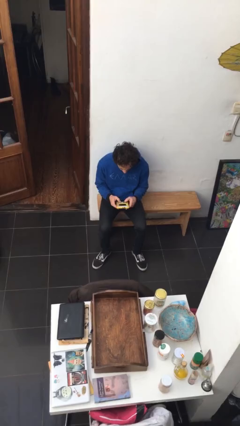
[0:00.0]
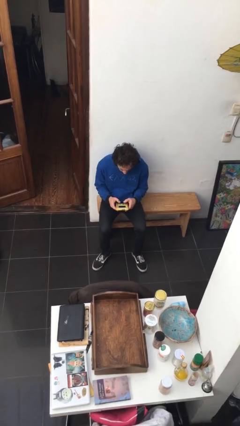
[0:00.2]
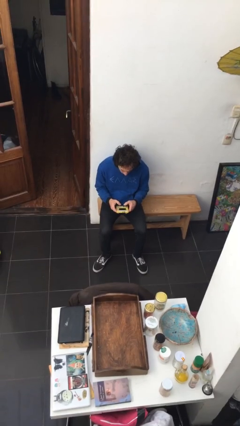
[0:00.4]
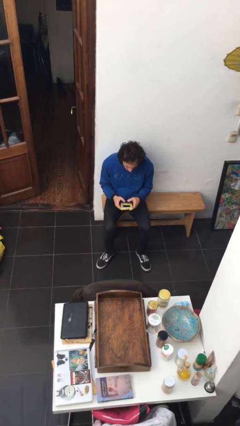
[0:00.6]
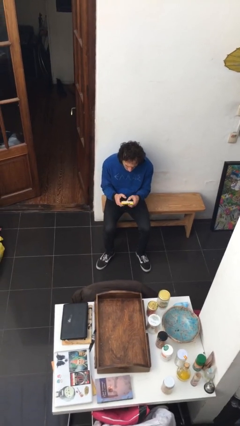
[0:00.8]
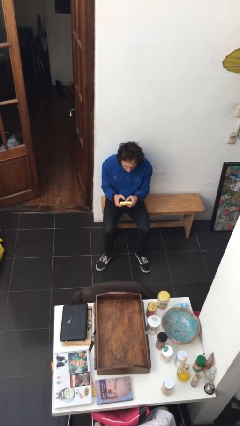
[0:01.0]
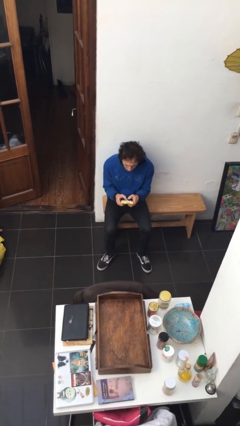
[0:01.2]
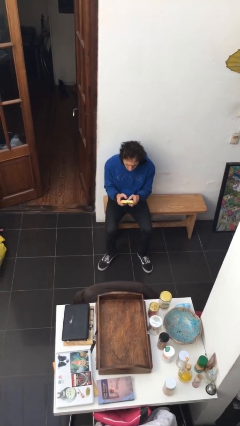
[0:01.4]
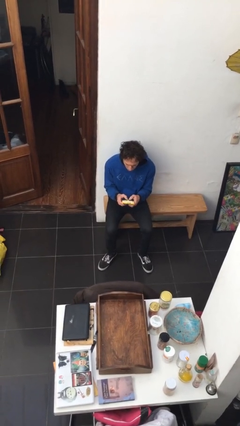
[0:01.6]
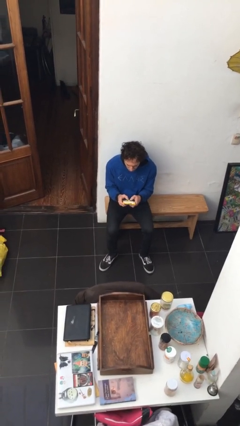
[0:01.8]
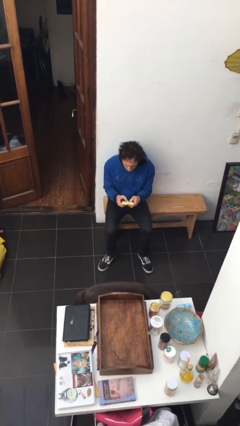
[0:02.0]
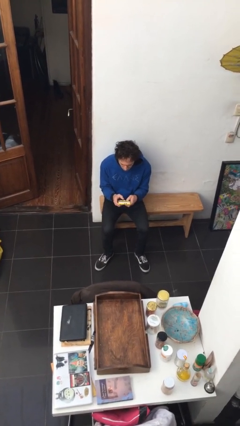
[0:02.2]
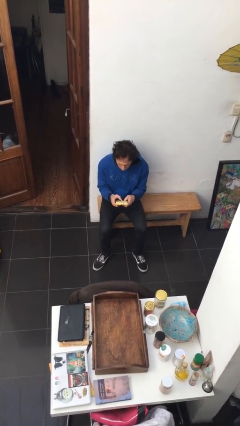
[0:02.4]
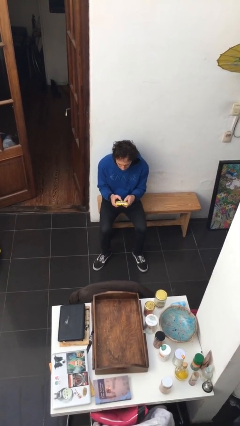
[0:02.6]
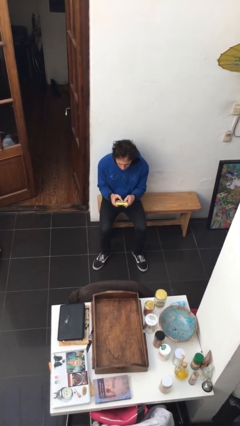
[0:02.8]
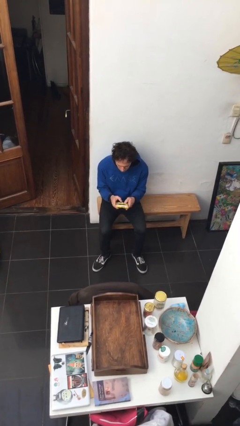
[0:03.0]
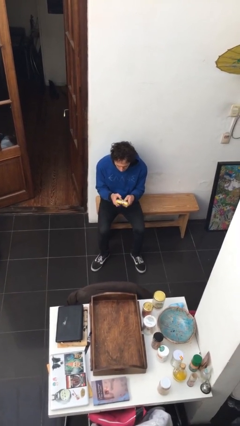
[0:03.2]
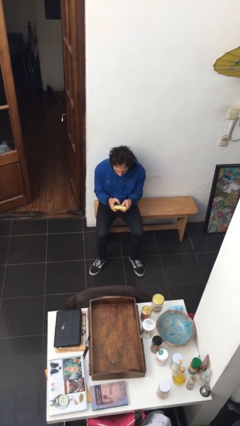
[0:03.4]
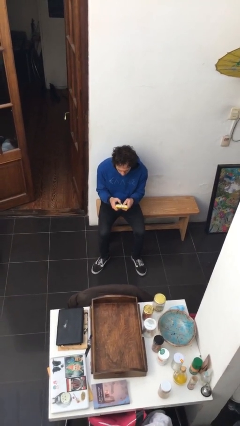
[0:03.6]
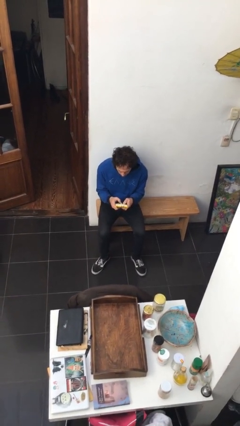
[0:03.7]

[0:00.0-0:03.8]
person interacts with handheld game

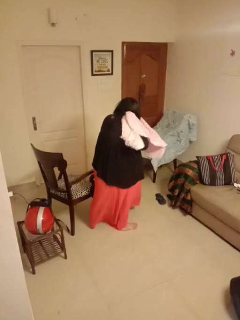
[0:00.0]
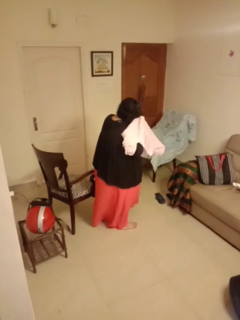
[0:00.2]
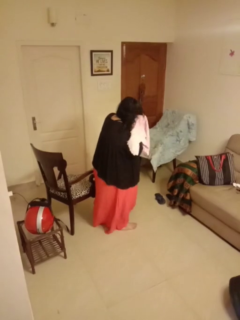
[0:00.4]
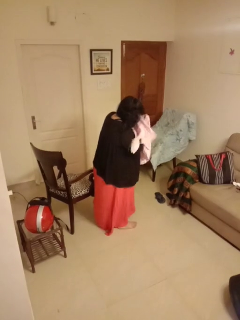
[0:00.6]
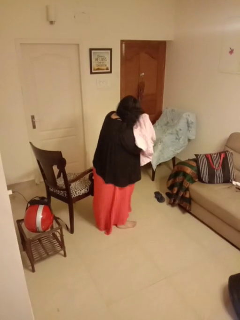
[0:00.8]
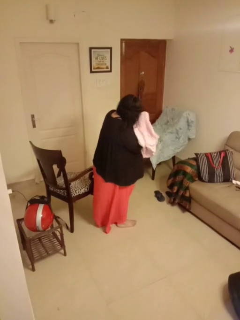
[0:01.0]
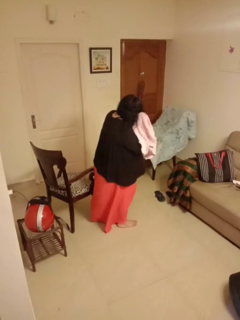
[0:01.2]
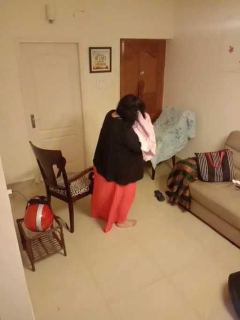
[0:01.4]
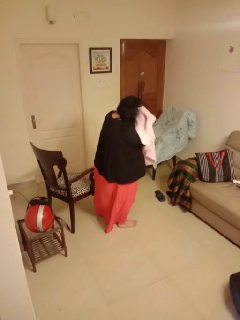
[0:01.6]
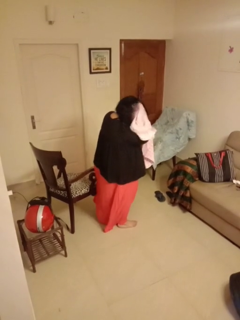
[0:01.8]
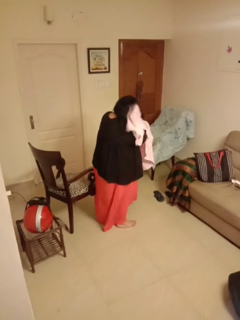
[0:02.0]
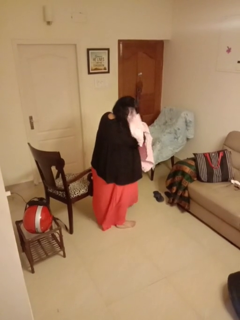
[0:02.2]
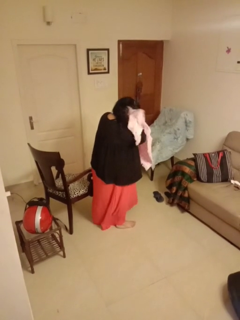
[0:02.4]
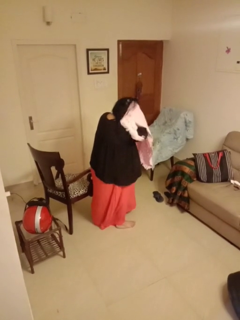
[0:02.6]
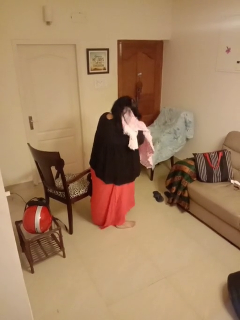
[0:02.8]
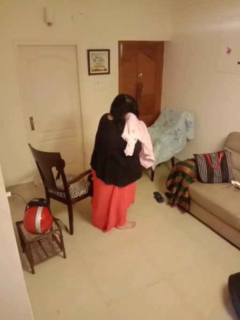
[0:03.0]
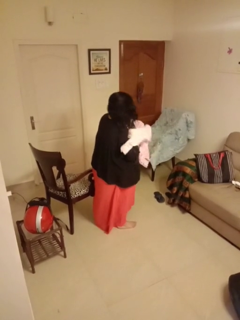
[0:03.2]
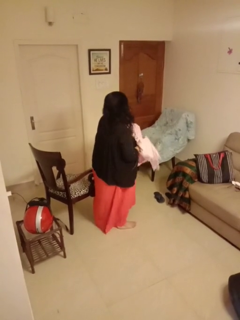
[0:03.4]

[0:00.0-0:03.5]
person dries hair with towel

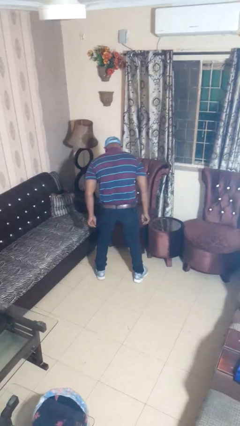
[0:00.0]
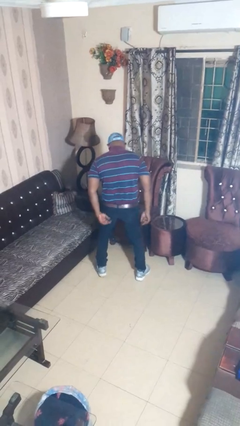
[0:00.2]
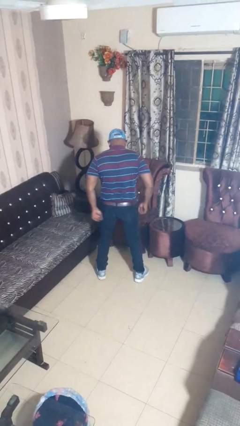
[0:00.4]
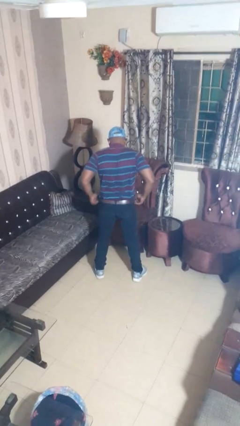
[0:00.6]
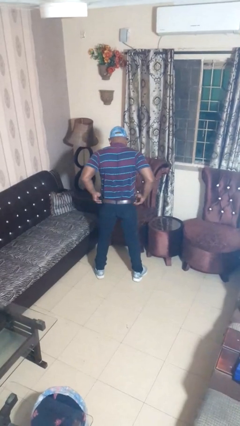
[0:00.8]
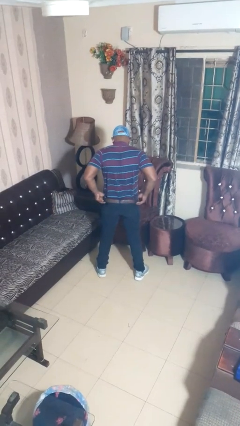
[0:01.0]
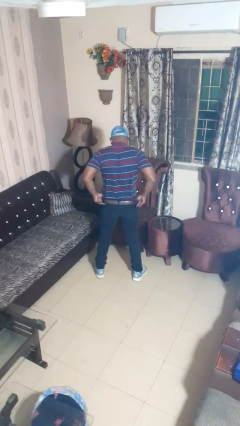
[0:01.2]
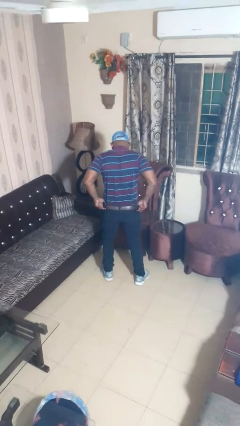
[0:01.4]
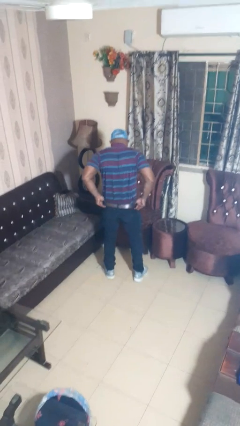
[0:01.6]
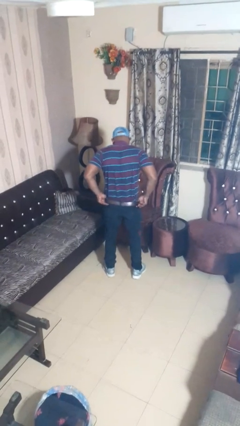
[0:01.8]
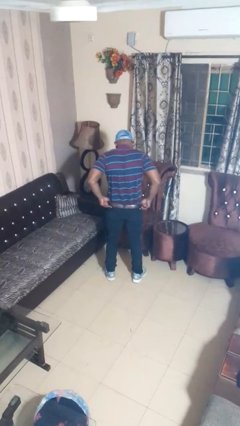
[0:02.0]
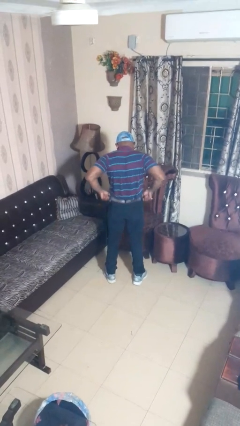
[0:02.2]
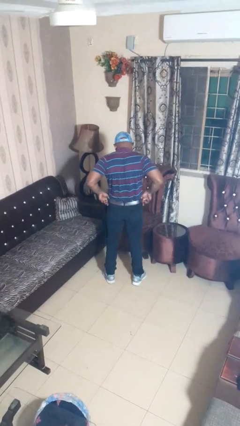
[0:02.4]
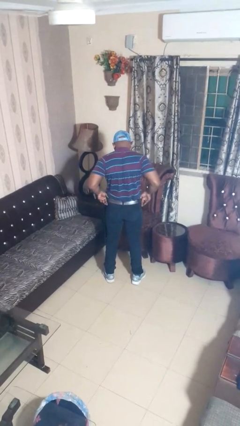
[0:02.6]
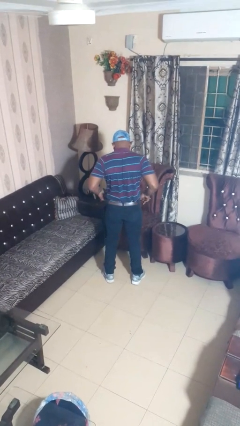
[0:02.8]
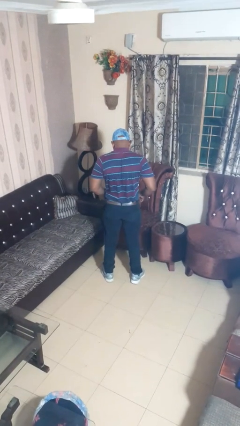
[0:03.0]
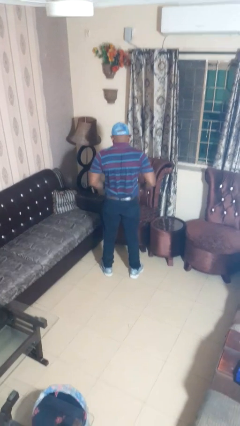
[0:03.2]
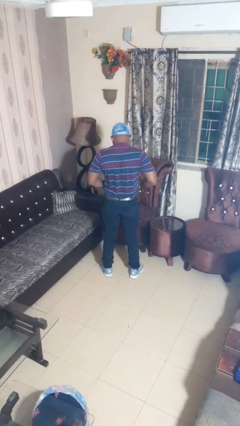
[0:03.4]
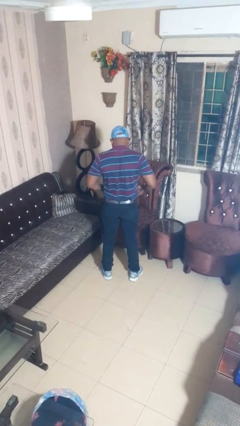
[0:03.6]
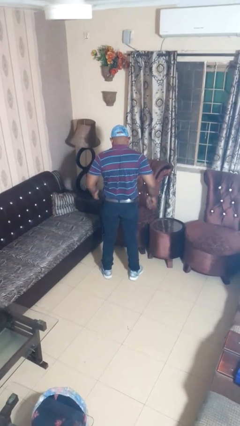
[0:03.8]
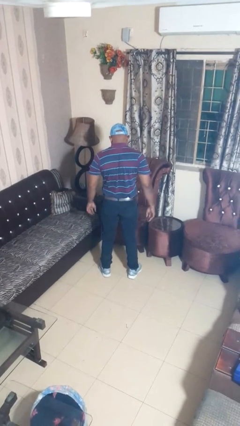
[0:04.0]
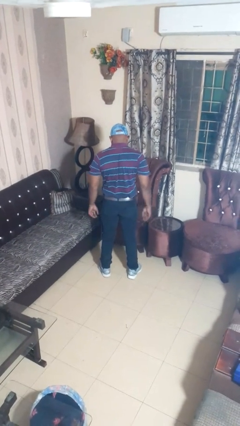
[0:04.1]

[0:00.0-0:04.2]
person hikes up pants

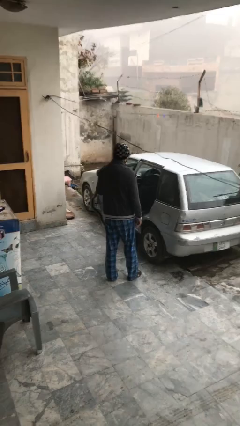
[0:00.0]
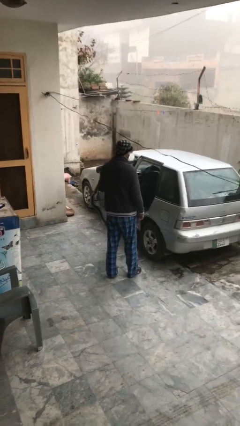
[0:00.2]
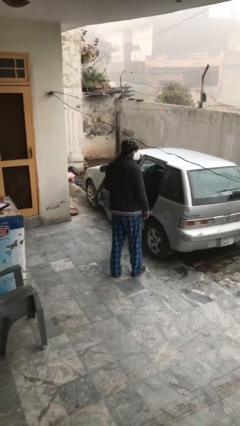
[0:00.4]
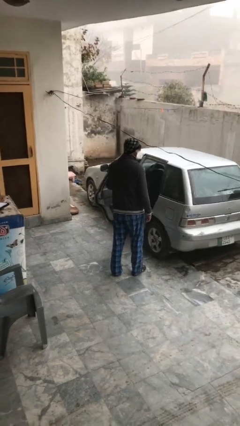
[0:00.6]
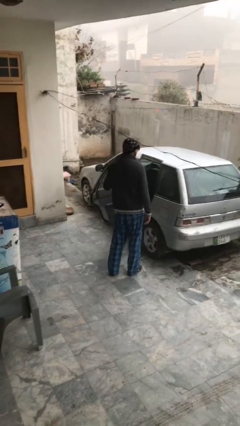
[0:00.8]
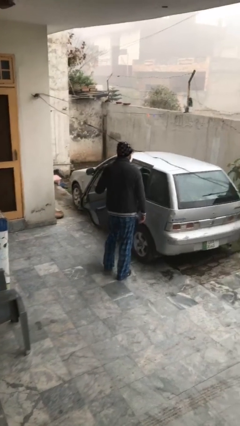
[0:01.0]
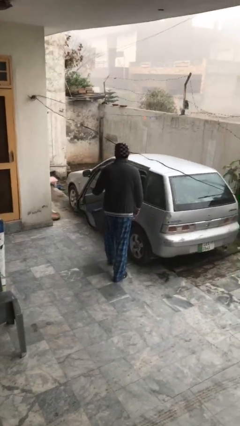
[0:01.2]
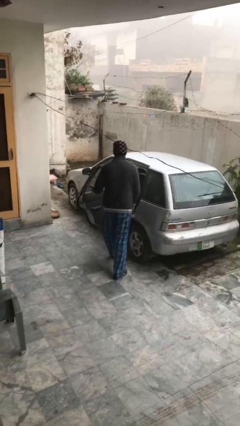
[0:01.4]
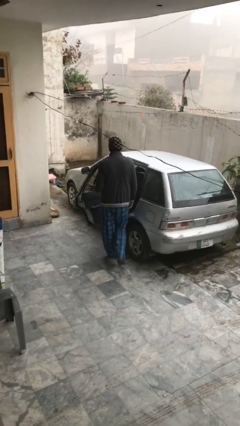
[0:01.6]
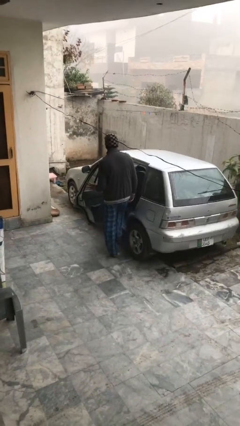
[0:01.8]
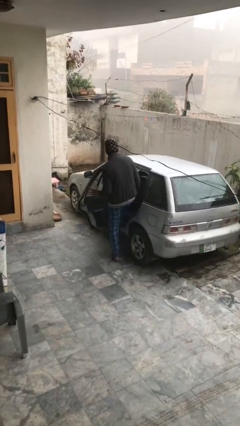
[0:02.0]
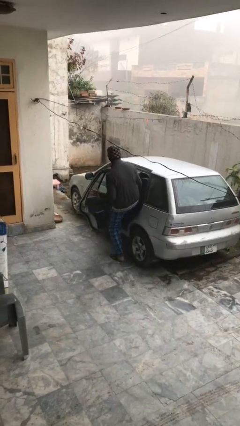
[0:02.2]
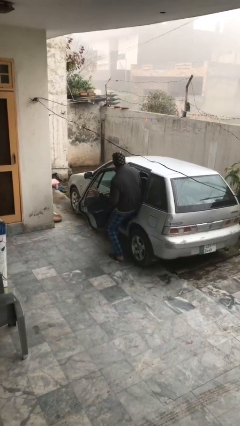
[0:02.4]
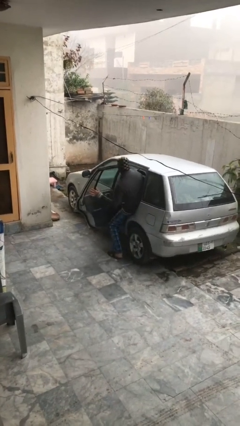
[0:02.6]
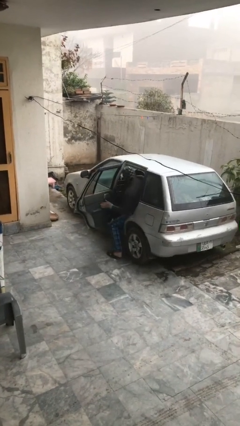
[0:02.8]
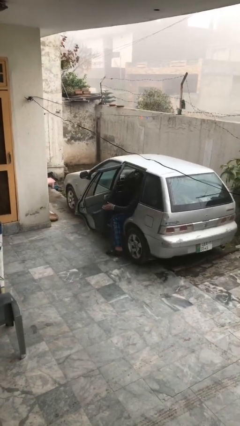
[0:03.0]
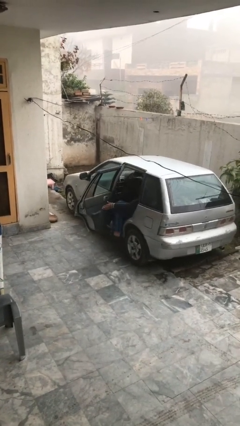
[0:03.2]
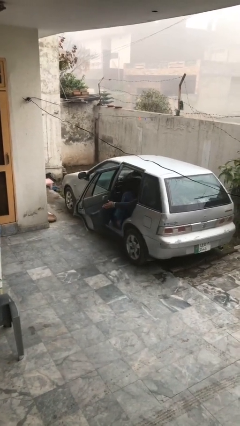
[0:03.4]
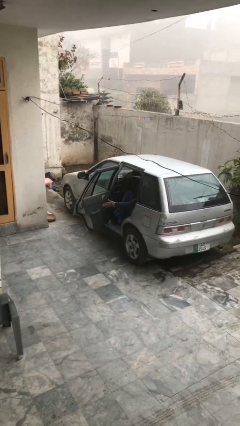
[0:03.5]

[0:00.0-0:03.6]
person enters car

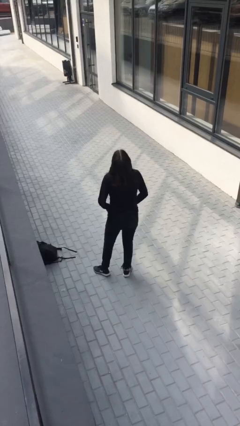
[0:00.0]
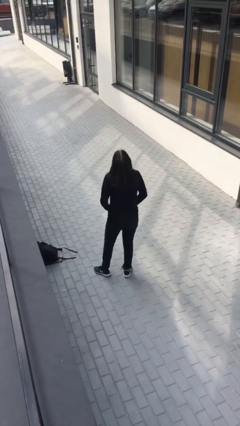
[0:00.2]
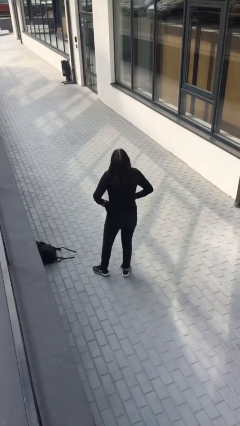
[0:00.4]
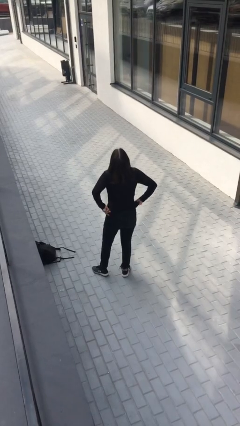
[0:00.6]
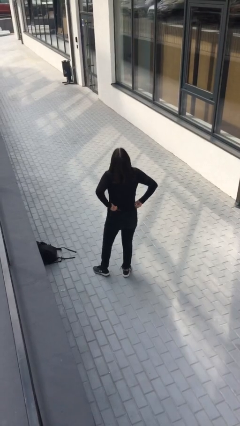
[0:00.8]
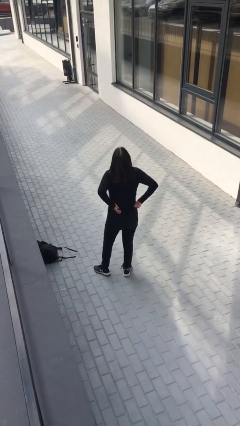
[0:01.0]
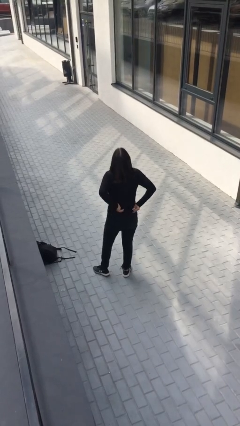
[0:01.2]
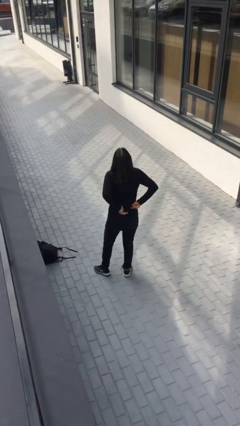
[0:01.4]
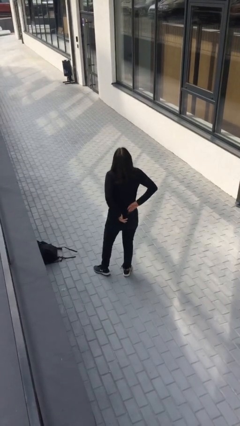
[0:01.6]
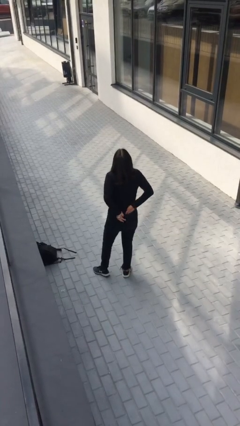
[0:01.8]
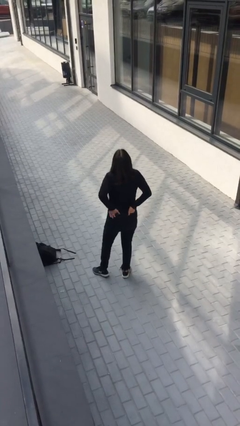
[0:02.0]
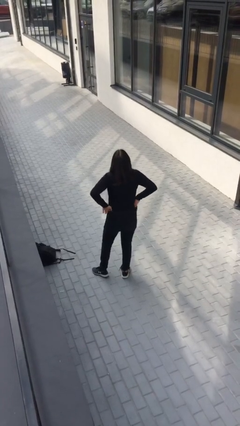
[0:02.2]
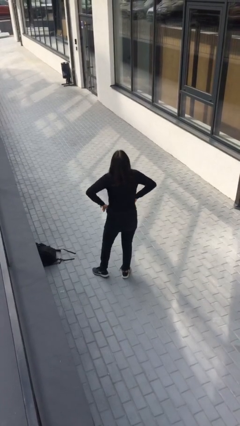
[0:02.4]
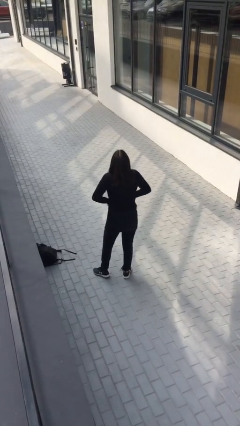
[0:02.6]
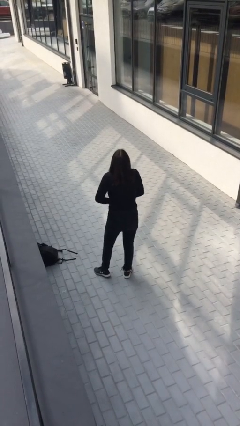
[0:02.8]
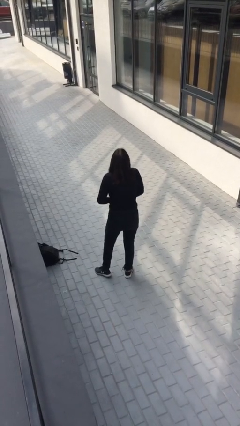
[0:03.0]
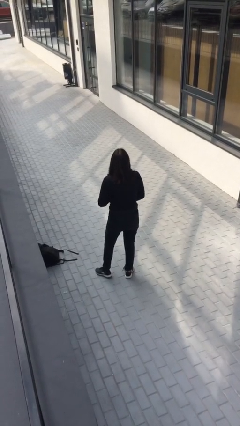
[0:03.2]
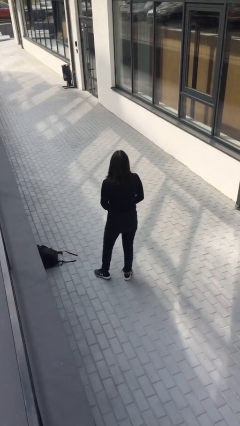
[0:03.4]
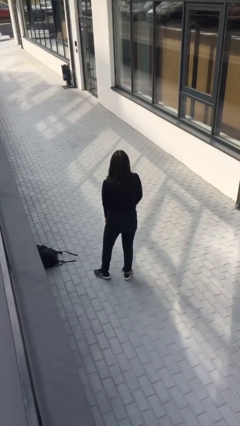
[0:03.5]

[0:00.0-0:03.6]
person tucks in shirt
